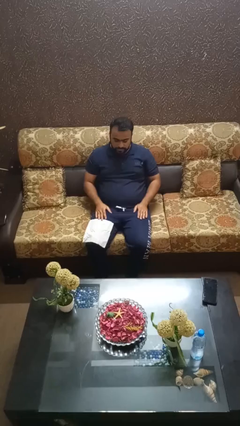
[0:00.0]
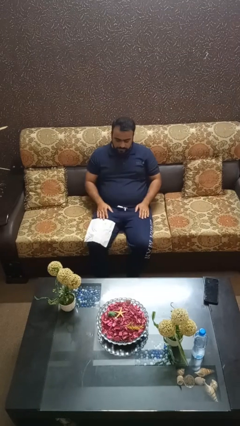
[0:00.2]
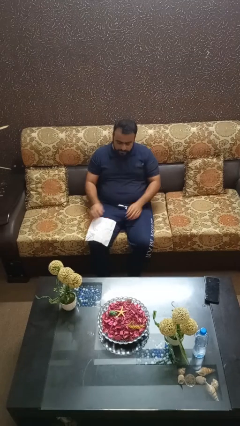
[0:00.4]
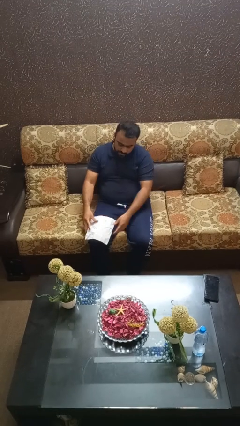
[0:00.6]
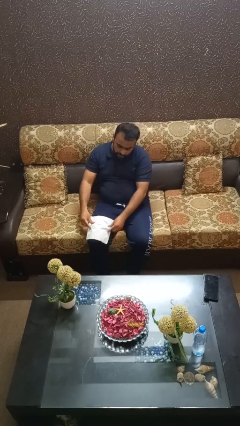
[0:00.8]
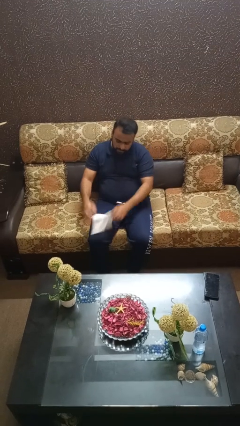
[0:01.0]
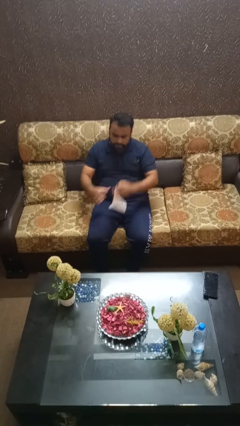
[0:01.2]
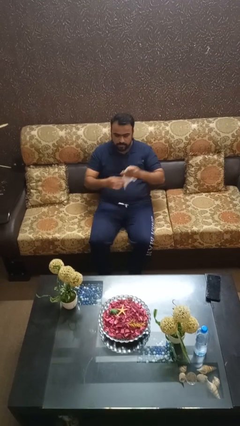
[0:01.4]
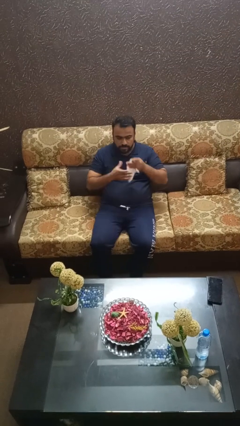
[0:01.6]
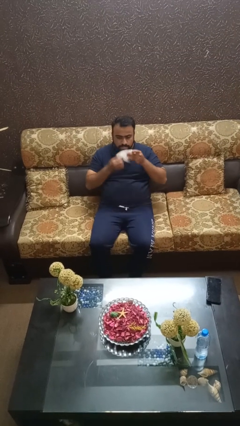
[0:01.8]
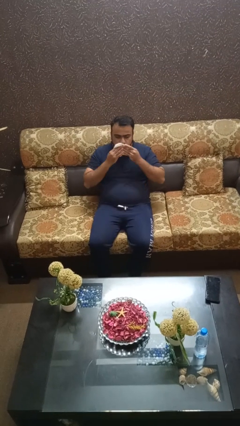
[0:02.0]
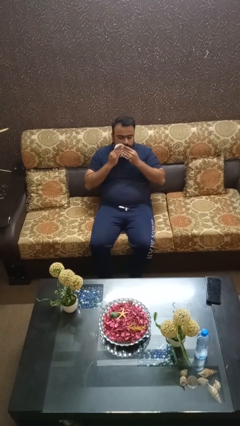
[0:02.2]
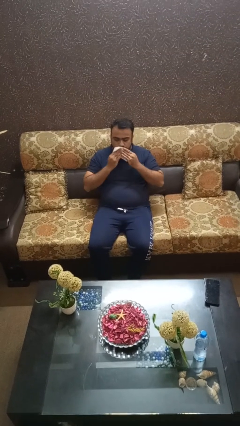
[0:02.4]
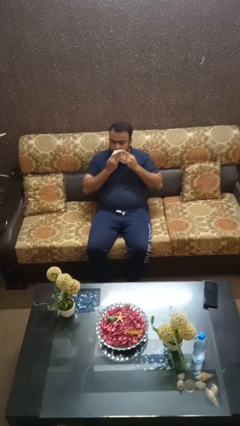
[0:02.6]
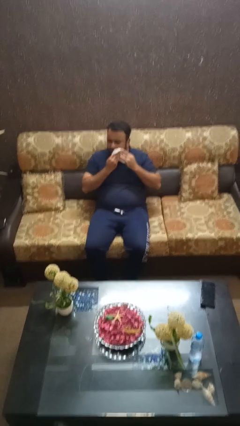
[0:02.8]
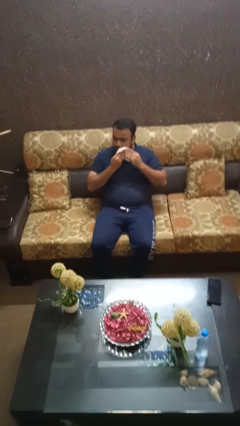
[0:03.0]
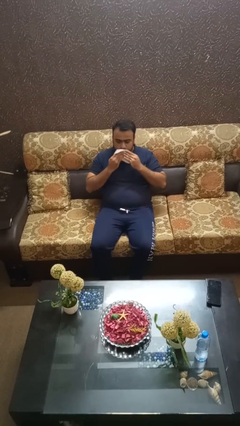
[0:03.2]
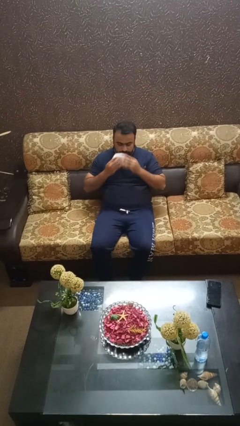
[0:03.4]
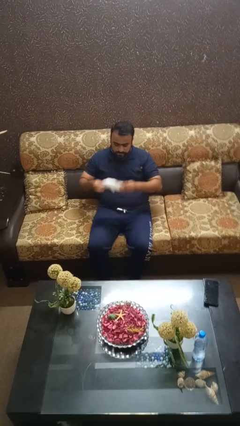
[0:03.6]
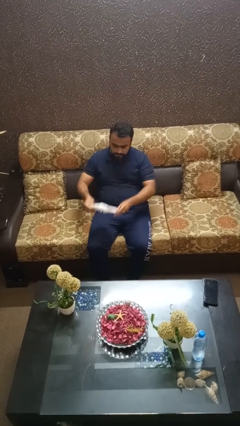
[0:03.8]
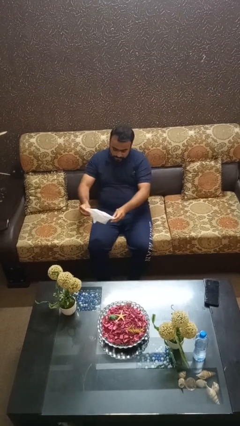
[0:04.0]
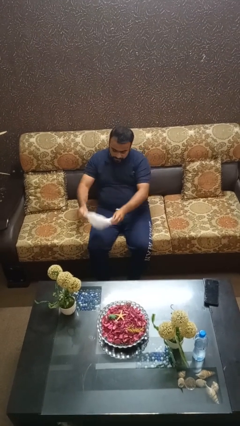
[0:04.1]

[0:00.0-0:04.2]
person wipes mouth with napkin

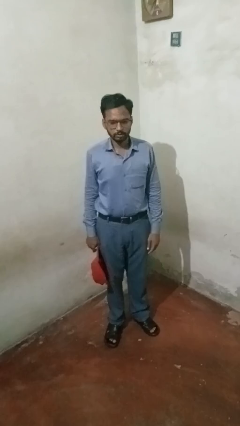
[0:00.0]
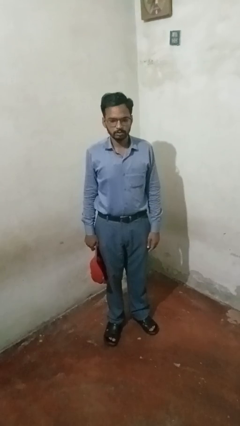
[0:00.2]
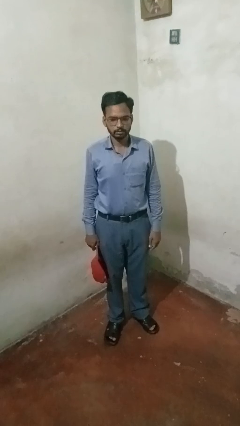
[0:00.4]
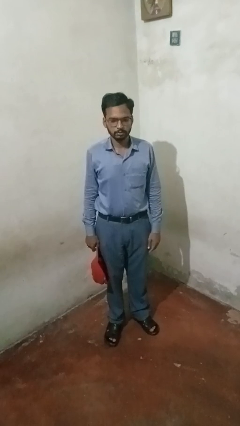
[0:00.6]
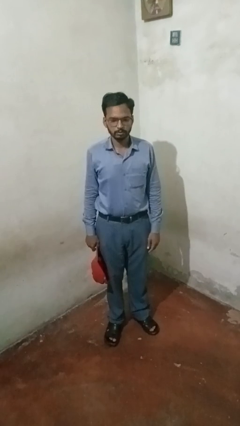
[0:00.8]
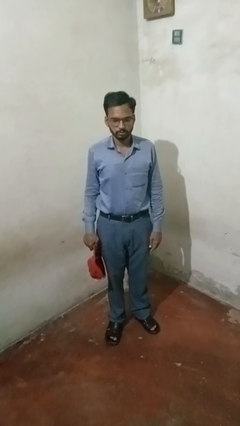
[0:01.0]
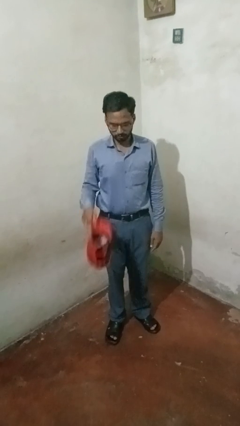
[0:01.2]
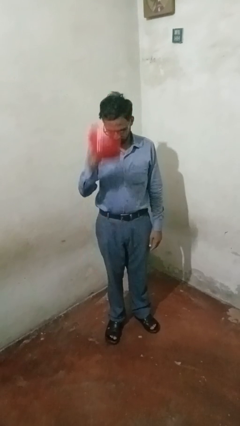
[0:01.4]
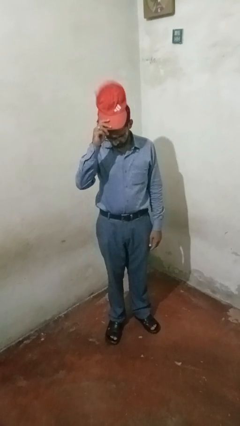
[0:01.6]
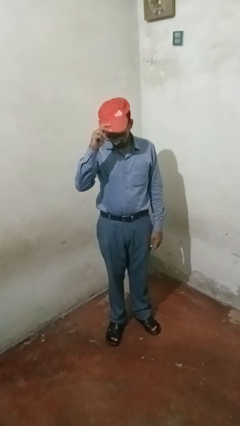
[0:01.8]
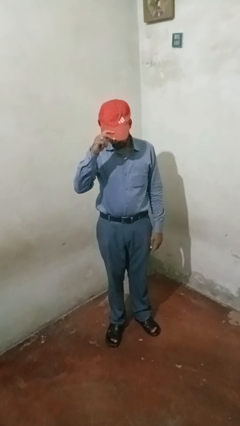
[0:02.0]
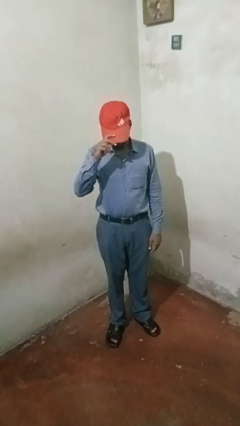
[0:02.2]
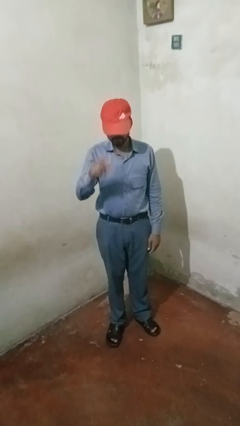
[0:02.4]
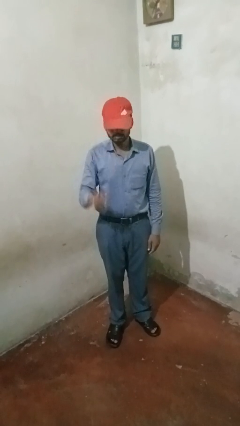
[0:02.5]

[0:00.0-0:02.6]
person puts on hat

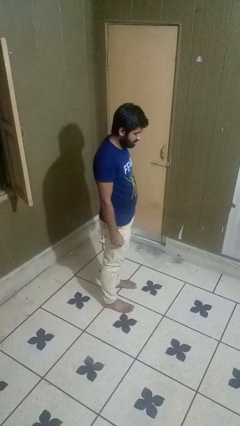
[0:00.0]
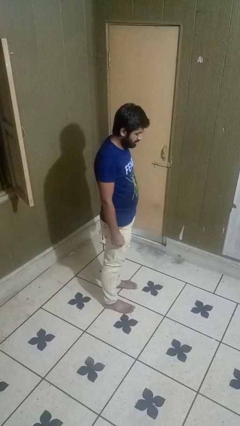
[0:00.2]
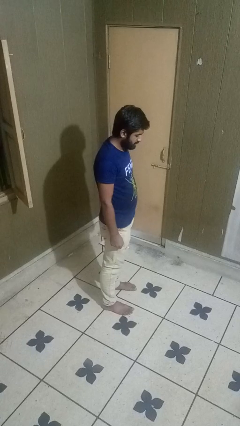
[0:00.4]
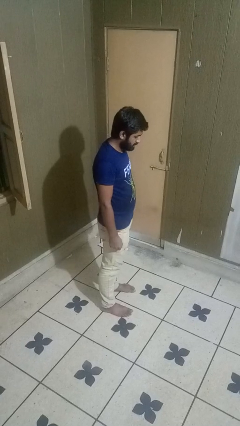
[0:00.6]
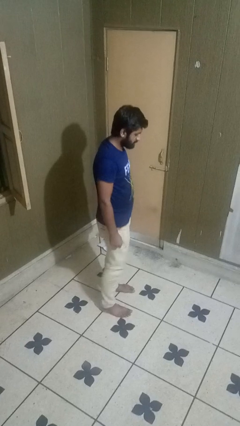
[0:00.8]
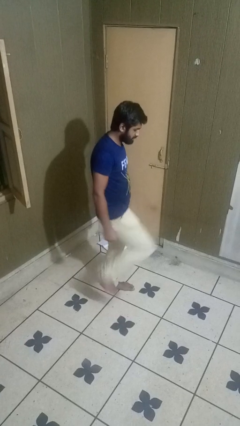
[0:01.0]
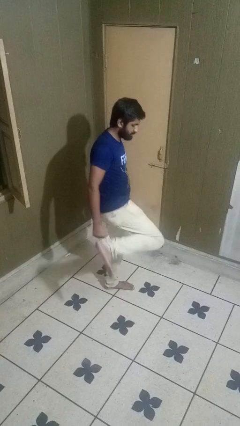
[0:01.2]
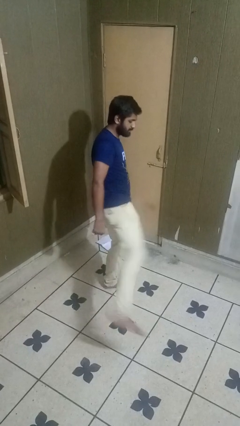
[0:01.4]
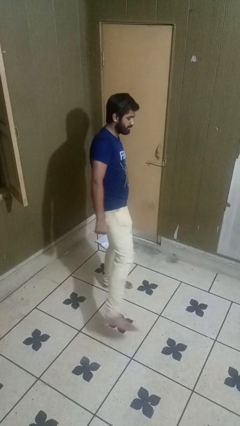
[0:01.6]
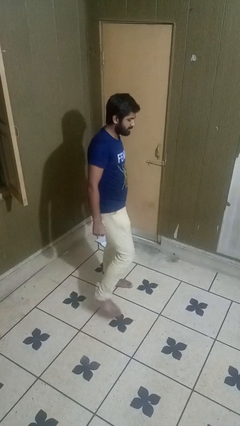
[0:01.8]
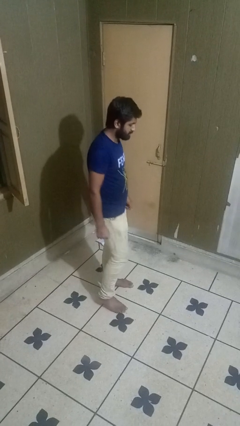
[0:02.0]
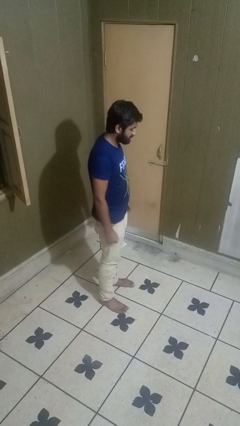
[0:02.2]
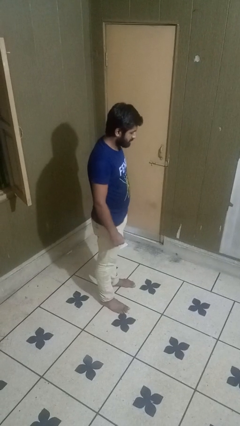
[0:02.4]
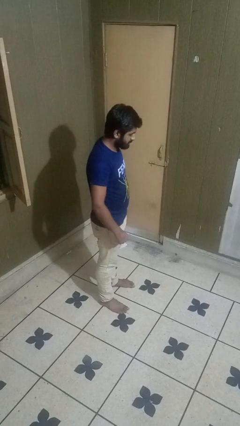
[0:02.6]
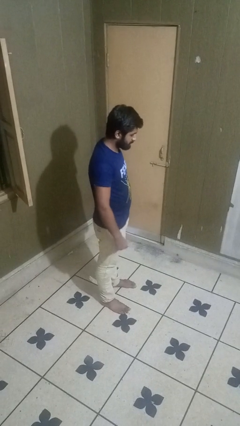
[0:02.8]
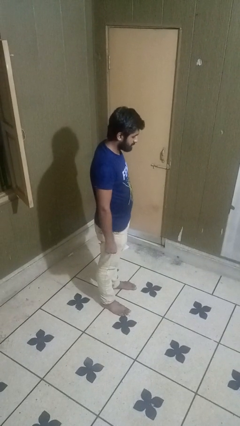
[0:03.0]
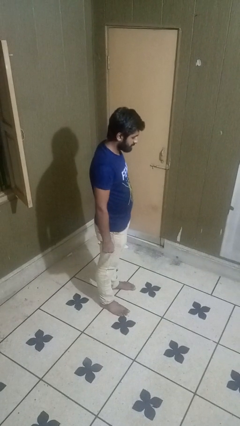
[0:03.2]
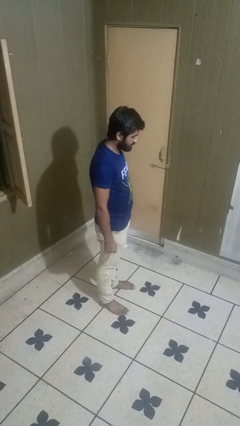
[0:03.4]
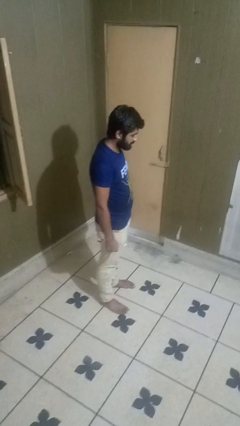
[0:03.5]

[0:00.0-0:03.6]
person karate kicks

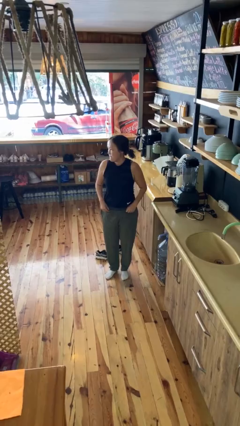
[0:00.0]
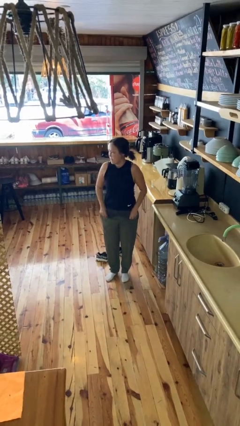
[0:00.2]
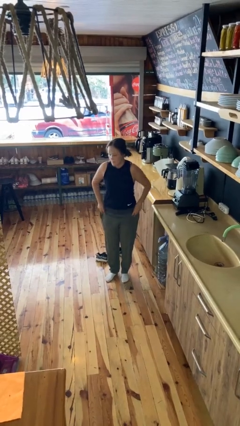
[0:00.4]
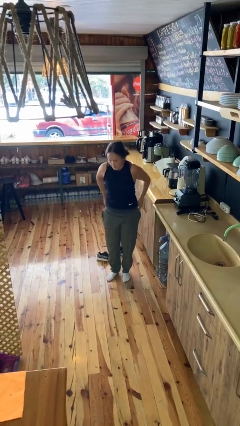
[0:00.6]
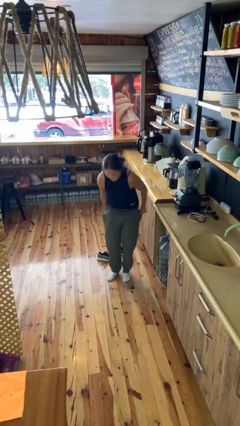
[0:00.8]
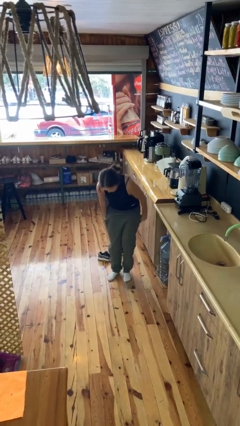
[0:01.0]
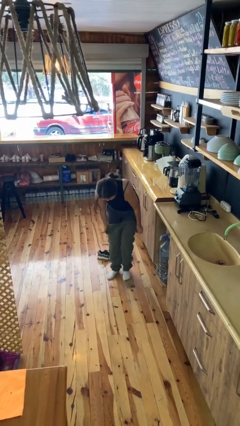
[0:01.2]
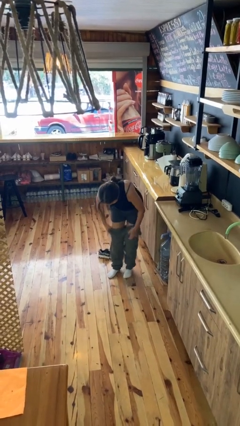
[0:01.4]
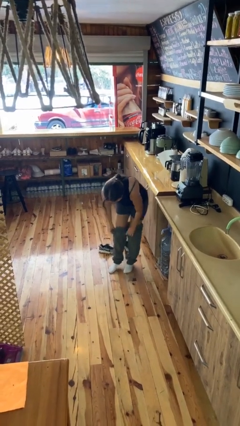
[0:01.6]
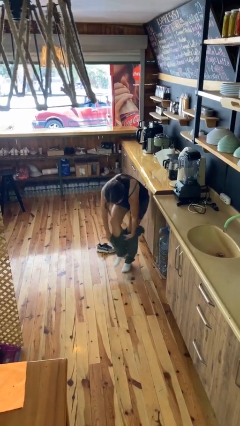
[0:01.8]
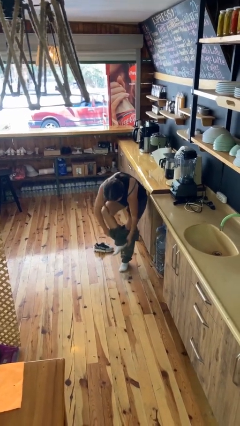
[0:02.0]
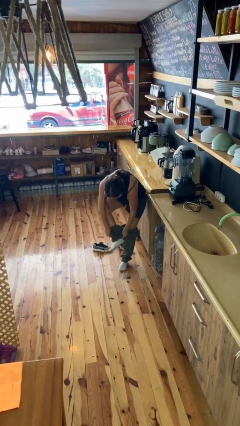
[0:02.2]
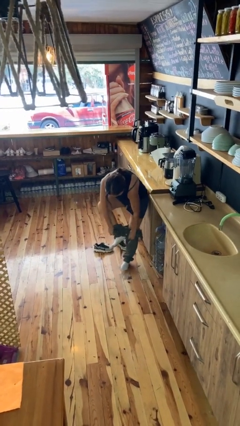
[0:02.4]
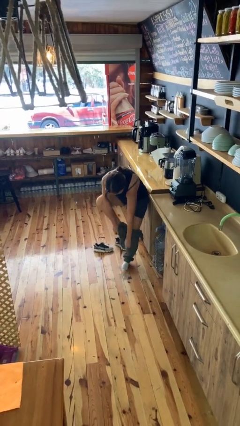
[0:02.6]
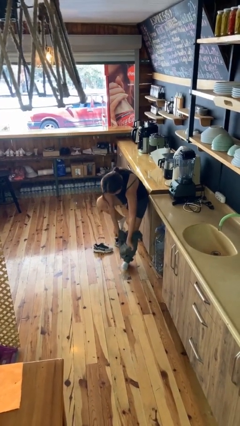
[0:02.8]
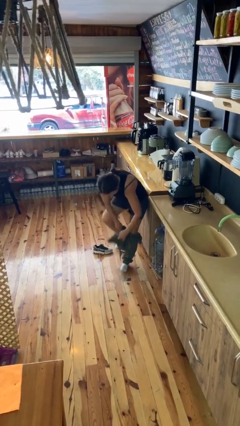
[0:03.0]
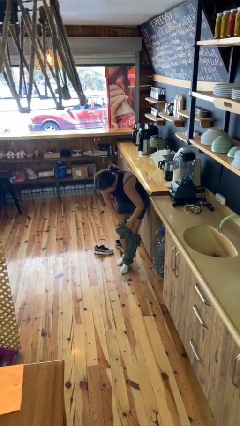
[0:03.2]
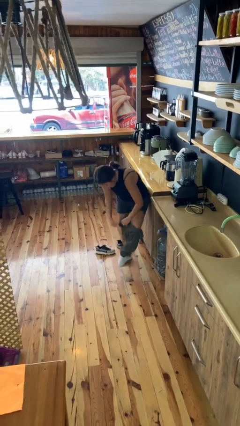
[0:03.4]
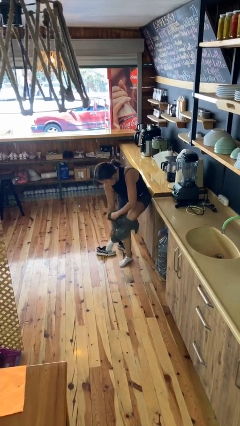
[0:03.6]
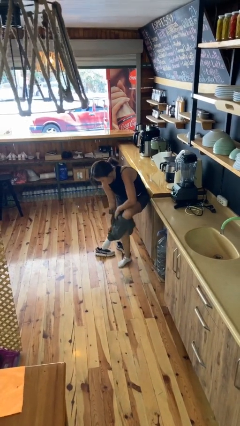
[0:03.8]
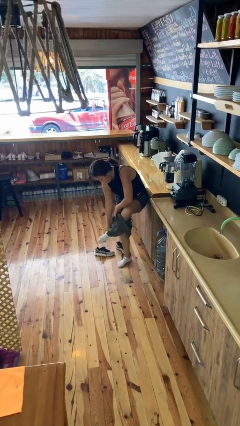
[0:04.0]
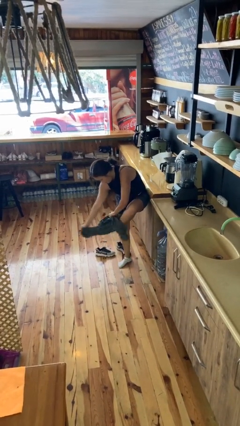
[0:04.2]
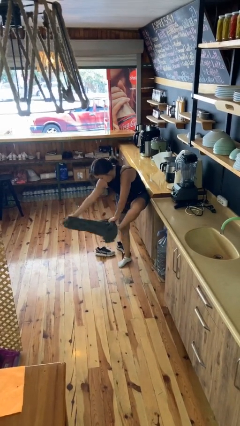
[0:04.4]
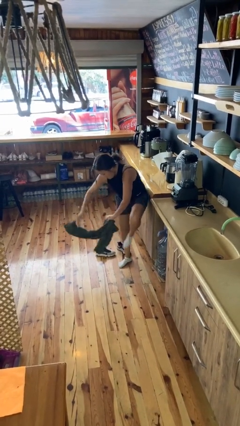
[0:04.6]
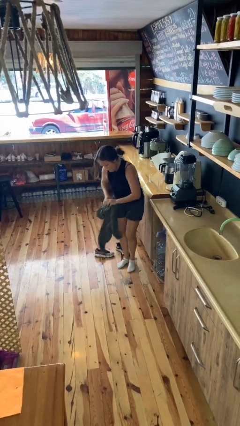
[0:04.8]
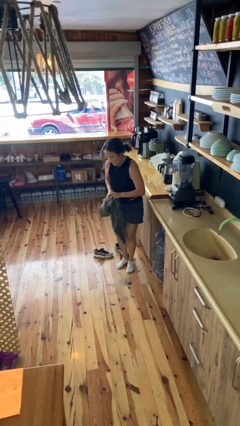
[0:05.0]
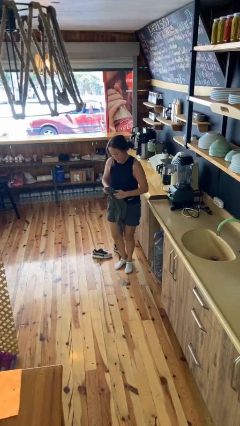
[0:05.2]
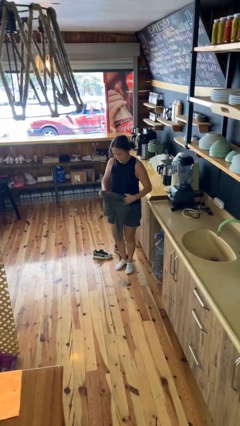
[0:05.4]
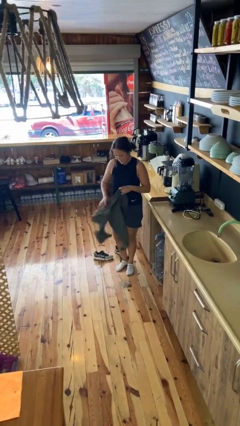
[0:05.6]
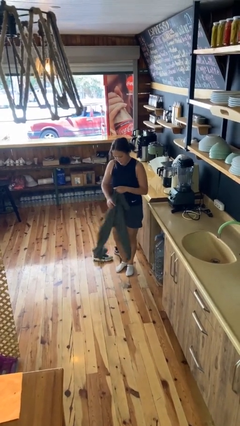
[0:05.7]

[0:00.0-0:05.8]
person takes off pants

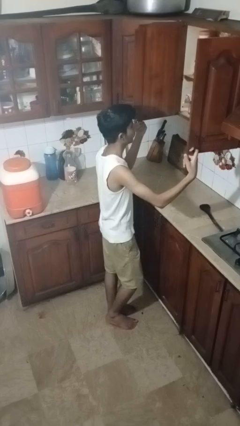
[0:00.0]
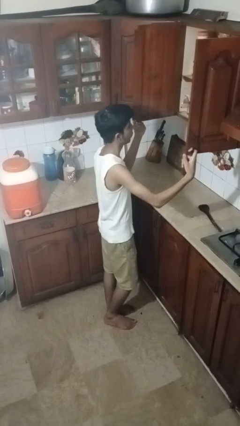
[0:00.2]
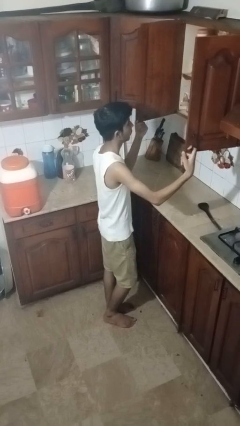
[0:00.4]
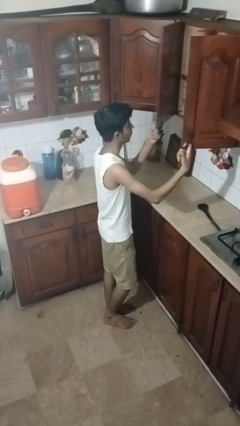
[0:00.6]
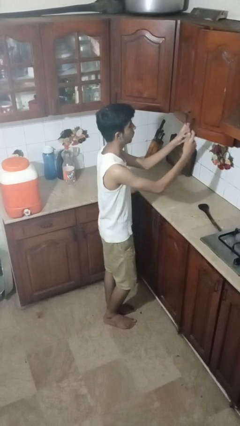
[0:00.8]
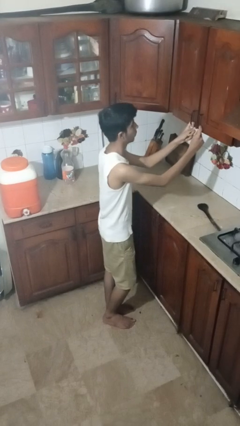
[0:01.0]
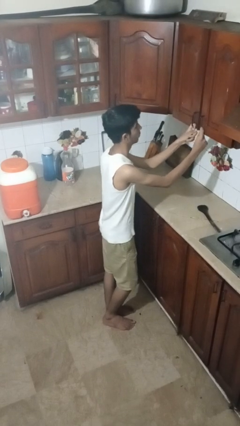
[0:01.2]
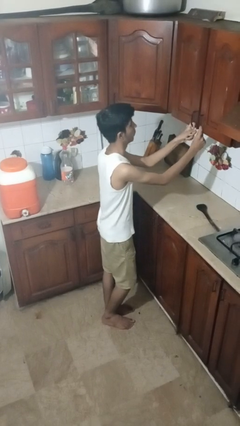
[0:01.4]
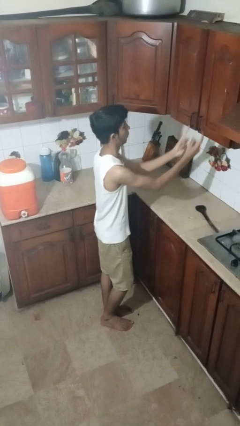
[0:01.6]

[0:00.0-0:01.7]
person closes cabinet

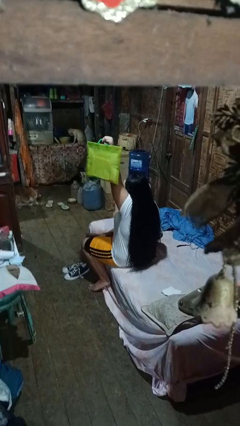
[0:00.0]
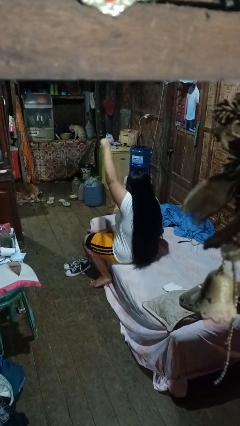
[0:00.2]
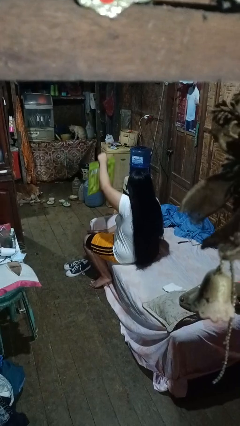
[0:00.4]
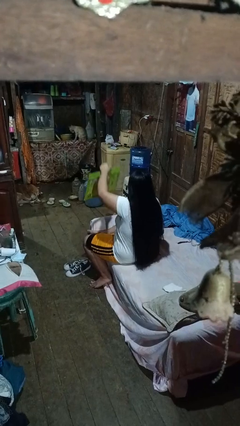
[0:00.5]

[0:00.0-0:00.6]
person holds object above head
